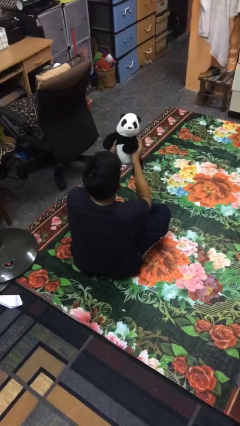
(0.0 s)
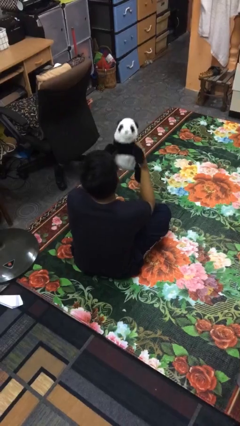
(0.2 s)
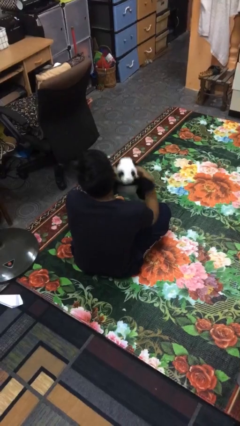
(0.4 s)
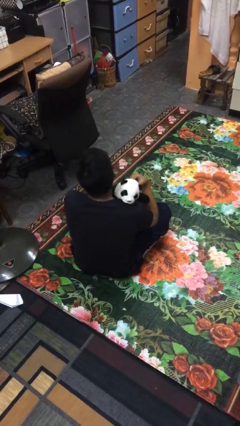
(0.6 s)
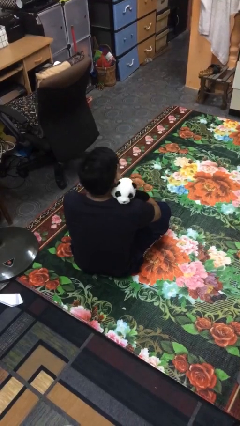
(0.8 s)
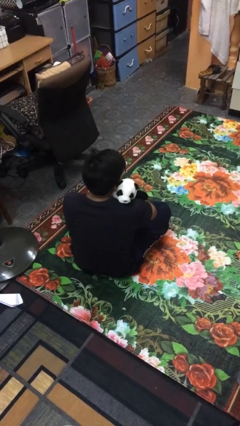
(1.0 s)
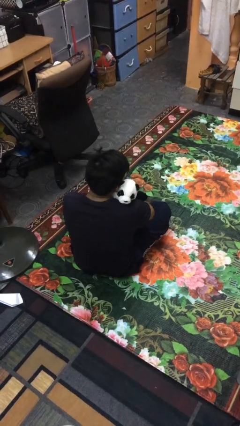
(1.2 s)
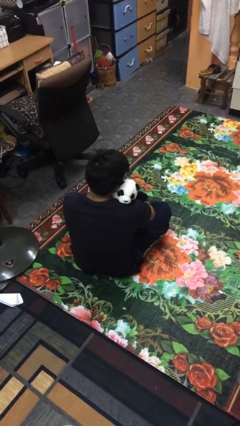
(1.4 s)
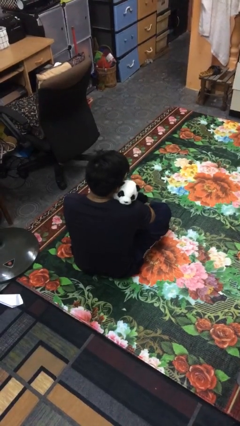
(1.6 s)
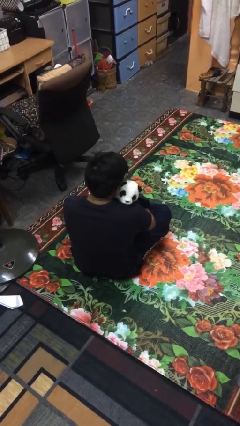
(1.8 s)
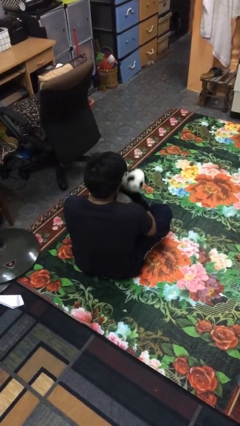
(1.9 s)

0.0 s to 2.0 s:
person hugs stuffed animal

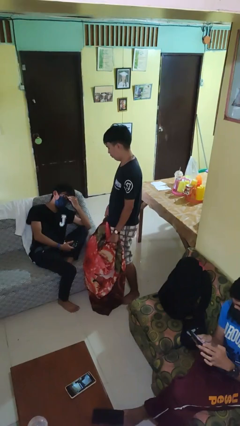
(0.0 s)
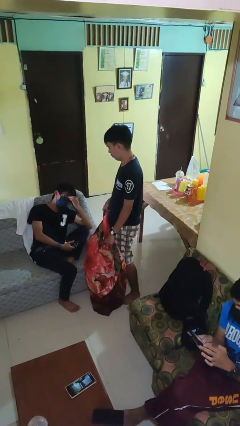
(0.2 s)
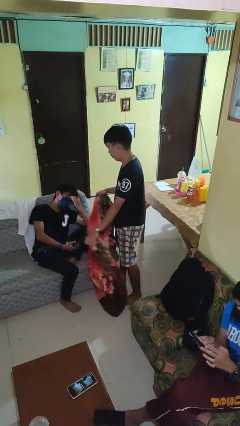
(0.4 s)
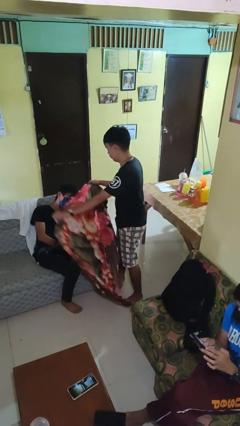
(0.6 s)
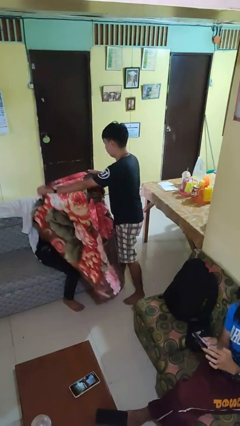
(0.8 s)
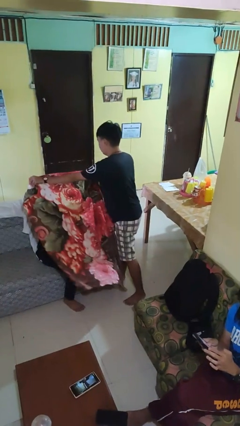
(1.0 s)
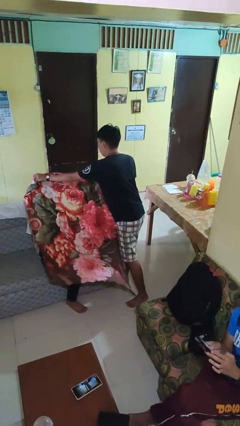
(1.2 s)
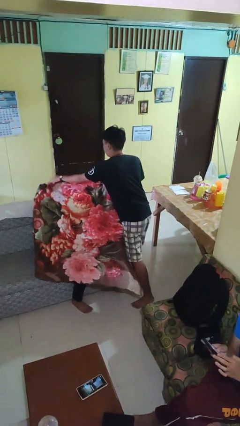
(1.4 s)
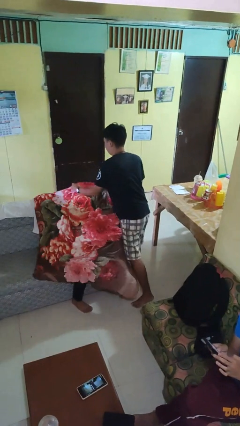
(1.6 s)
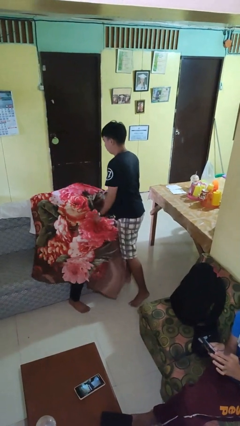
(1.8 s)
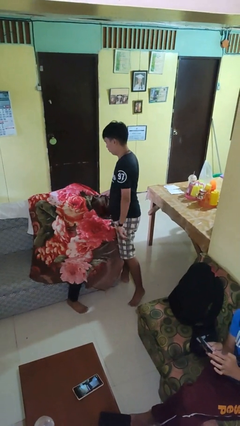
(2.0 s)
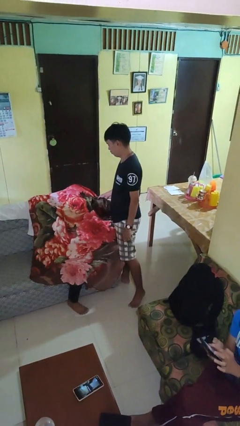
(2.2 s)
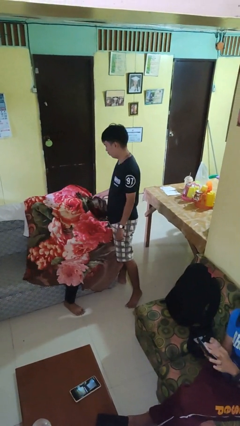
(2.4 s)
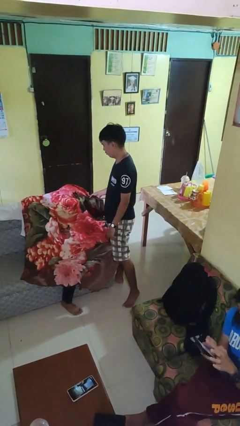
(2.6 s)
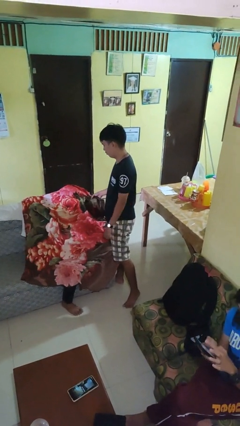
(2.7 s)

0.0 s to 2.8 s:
person covers friend with blanket

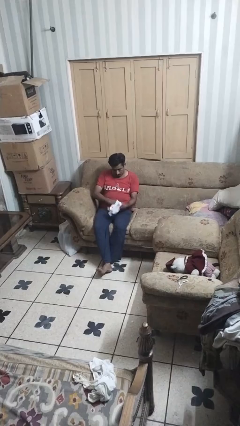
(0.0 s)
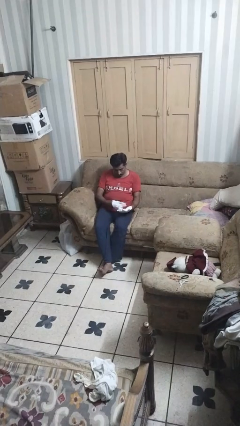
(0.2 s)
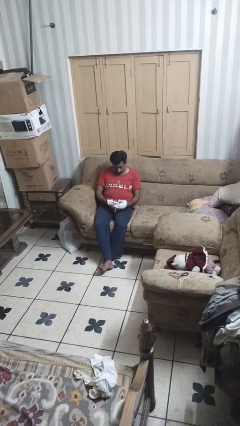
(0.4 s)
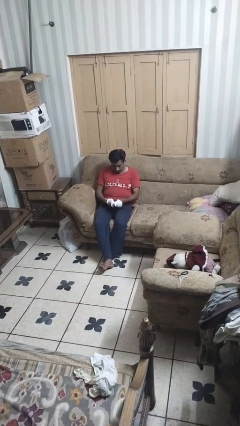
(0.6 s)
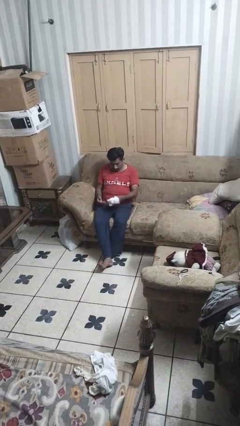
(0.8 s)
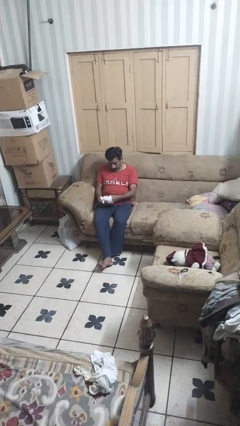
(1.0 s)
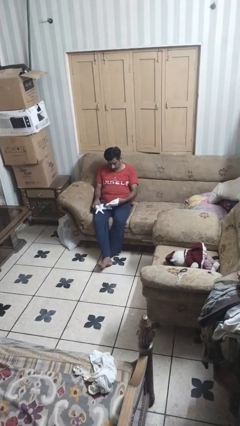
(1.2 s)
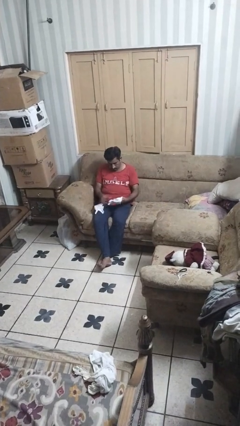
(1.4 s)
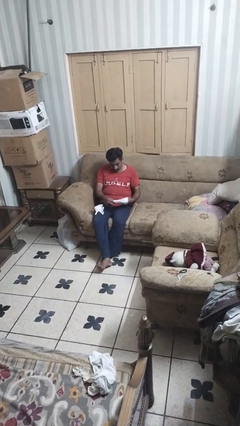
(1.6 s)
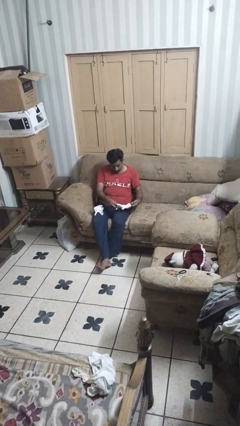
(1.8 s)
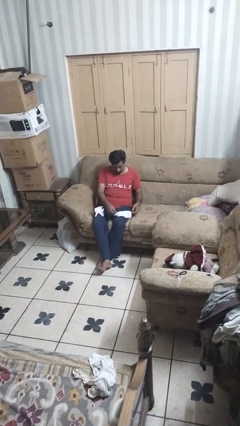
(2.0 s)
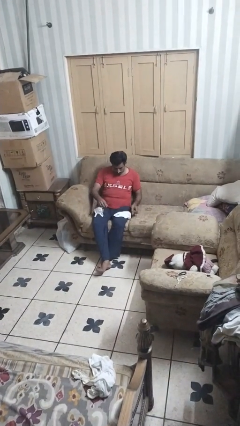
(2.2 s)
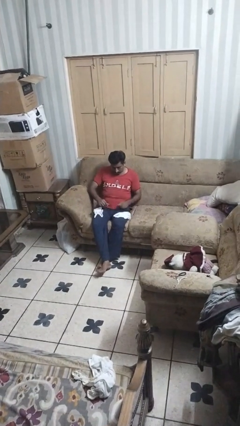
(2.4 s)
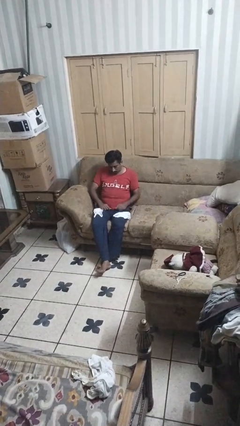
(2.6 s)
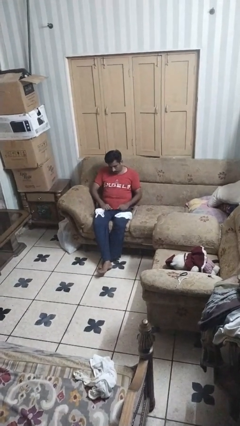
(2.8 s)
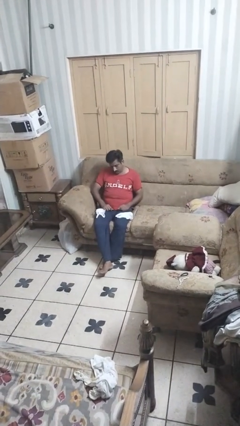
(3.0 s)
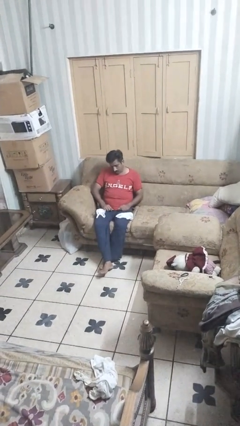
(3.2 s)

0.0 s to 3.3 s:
person takes off gloves

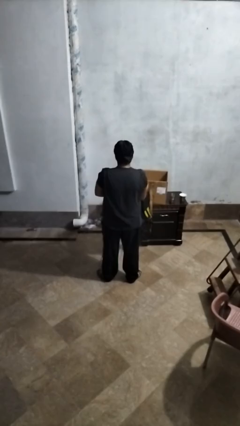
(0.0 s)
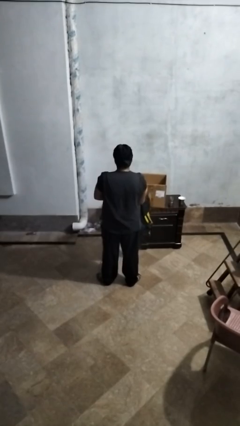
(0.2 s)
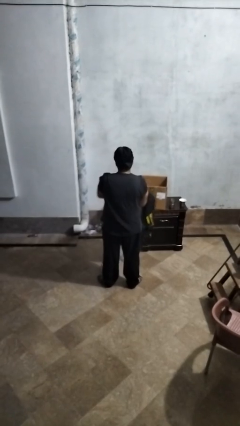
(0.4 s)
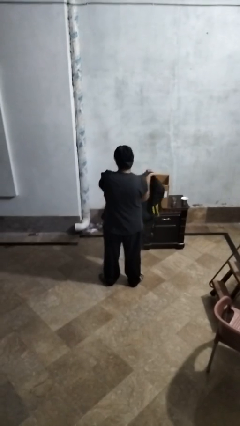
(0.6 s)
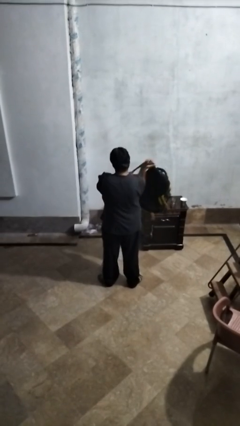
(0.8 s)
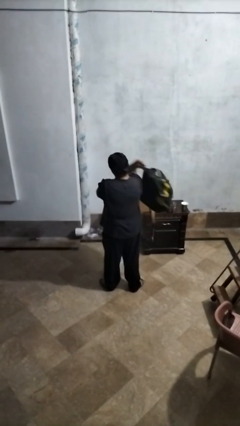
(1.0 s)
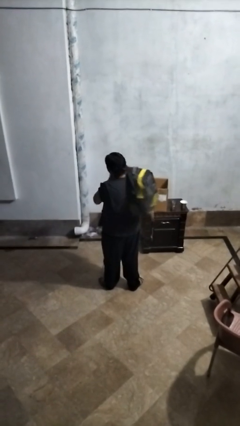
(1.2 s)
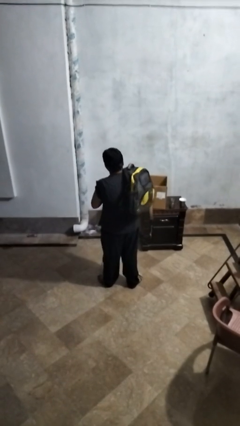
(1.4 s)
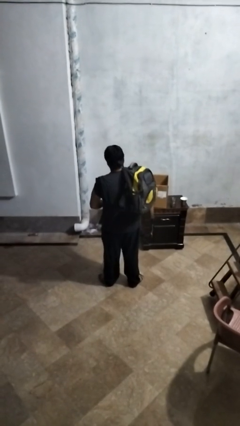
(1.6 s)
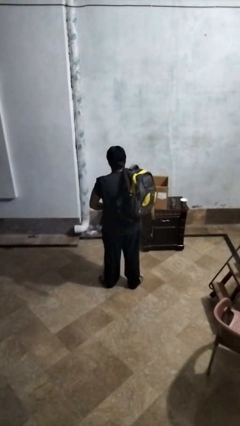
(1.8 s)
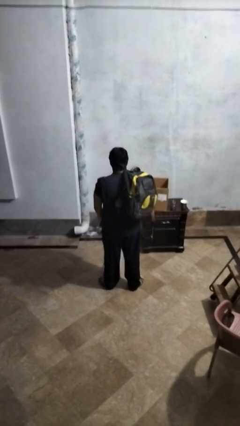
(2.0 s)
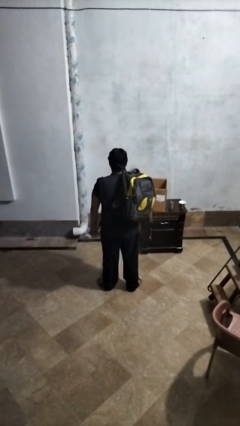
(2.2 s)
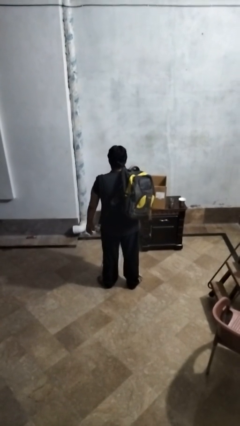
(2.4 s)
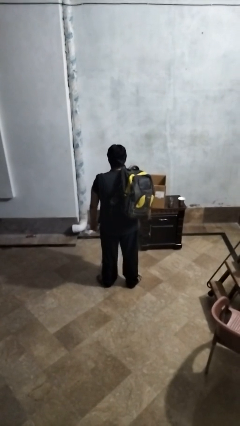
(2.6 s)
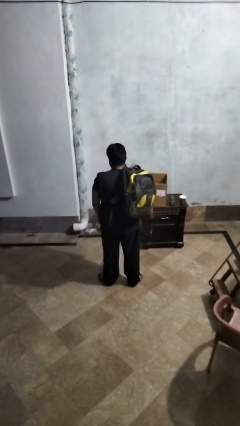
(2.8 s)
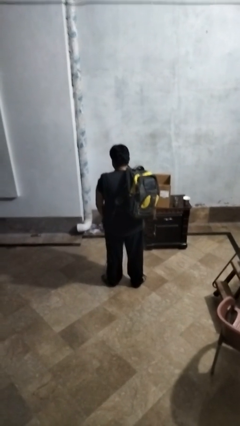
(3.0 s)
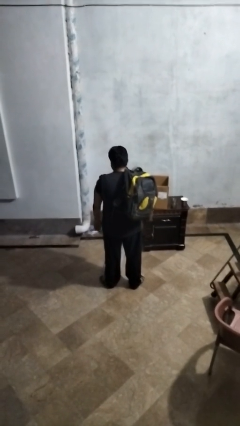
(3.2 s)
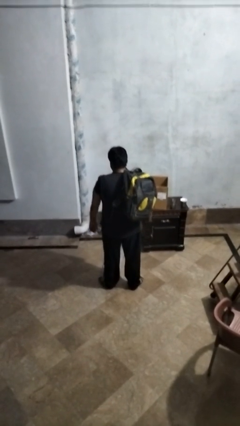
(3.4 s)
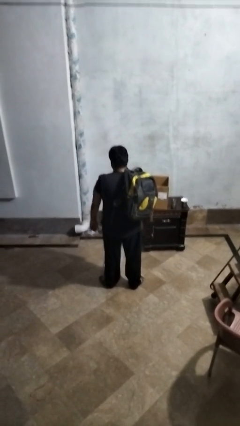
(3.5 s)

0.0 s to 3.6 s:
person puts on backpack

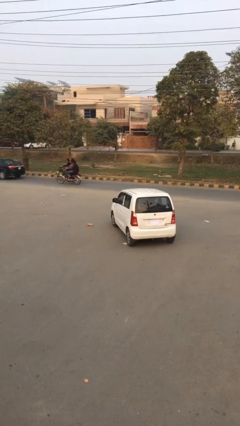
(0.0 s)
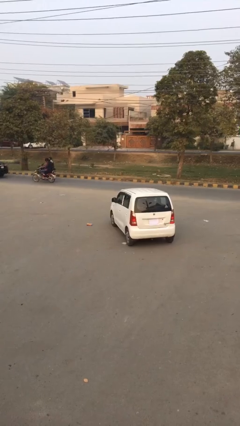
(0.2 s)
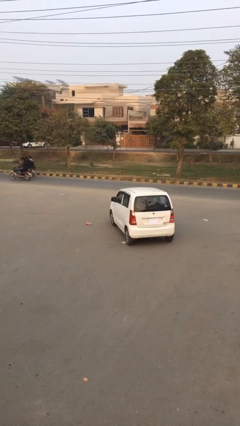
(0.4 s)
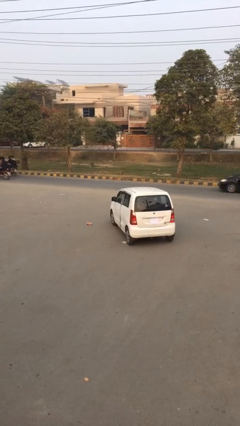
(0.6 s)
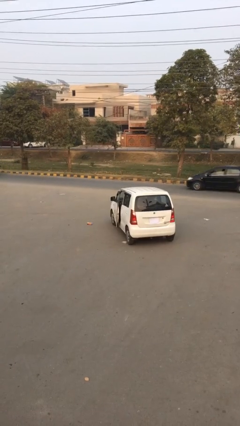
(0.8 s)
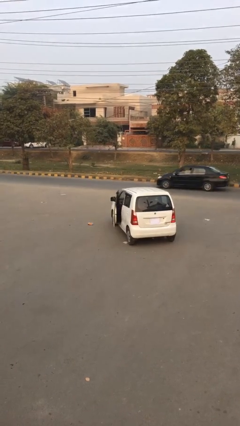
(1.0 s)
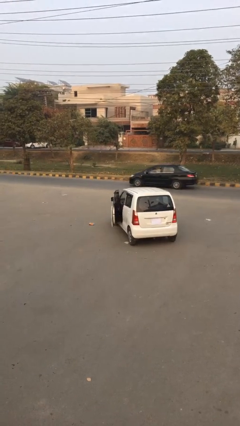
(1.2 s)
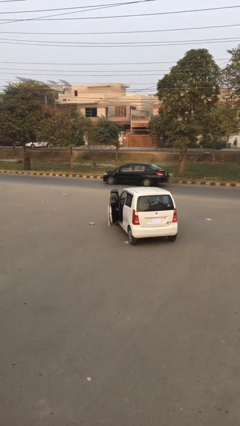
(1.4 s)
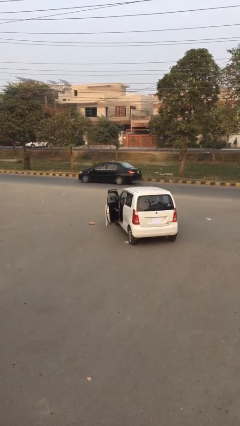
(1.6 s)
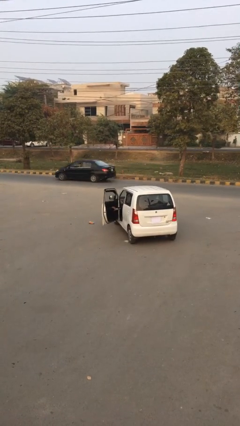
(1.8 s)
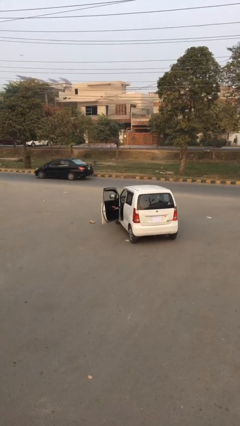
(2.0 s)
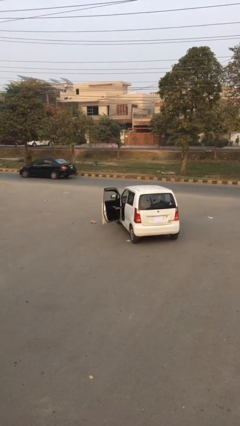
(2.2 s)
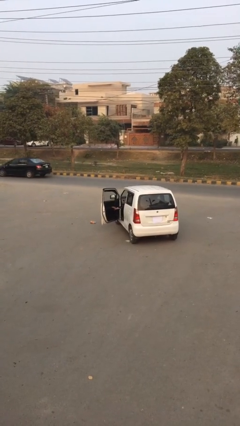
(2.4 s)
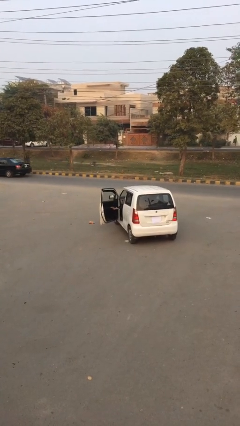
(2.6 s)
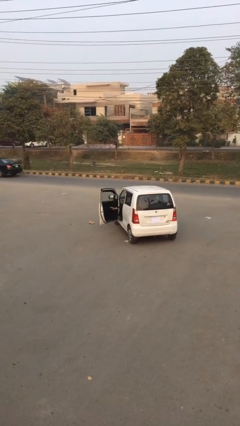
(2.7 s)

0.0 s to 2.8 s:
person opens car door

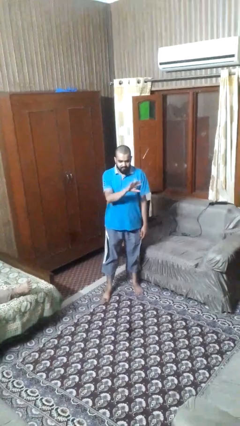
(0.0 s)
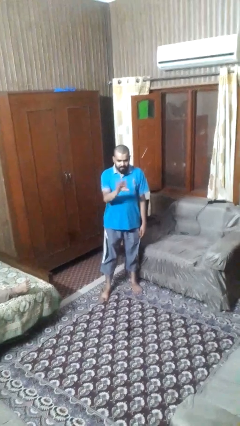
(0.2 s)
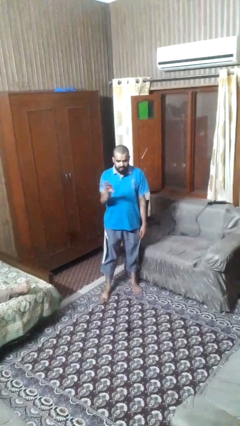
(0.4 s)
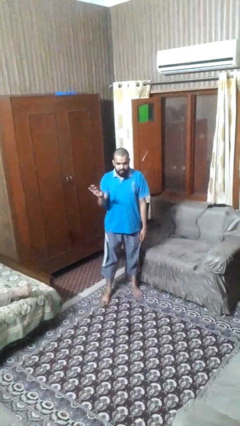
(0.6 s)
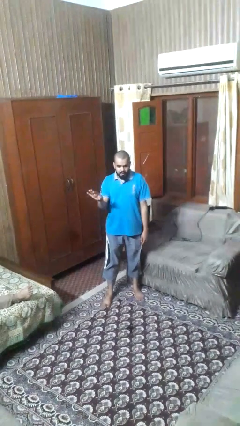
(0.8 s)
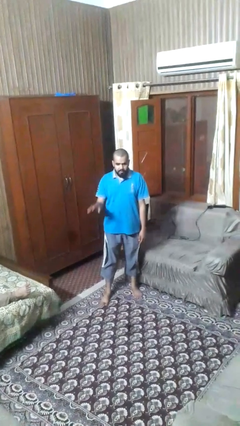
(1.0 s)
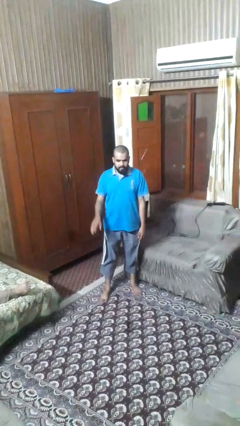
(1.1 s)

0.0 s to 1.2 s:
person gestures swipe left

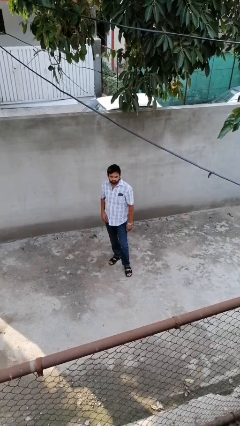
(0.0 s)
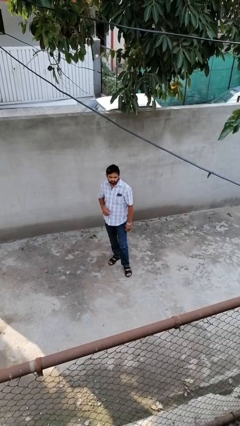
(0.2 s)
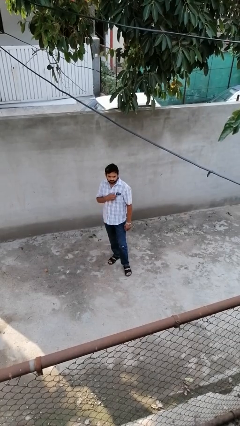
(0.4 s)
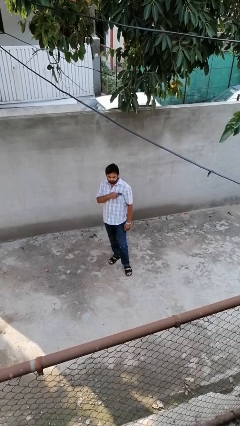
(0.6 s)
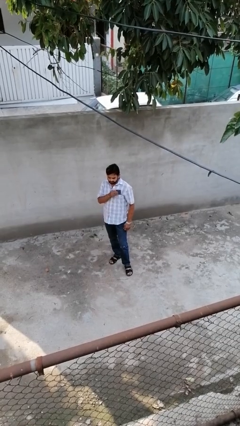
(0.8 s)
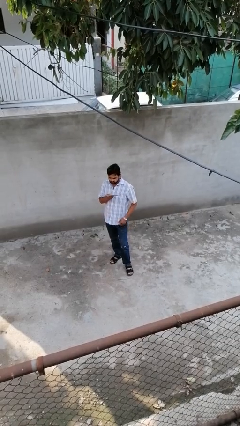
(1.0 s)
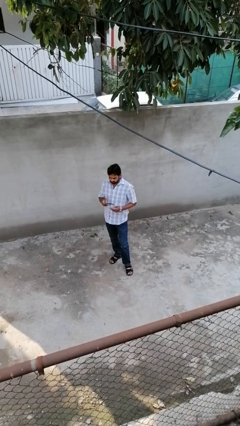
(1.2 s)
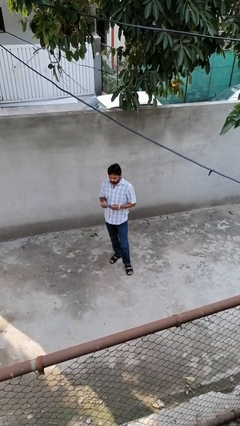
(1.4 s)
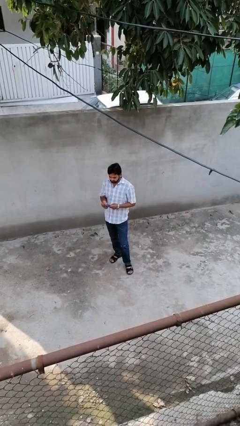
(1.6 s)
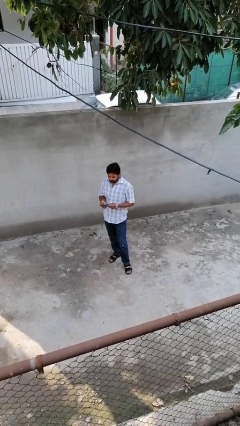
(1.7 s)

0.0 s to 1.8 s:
person takes phone from pocket
